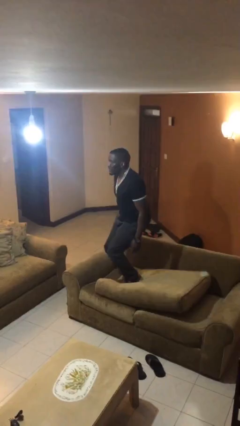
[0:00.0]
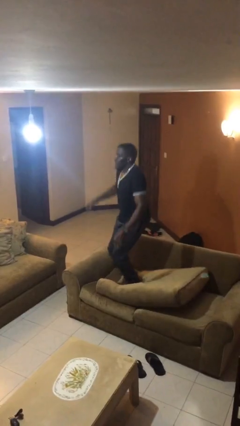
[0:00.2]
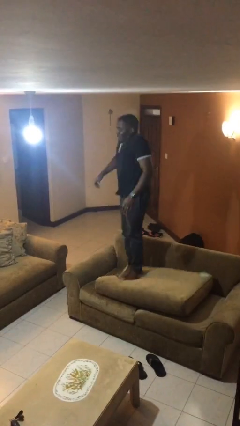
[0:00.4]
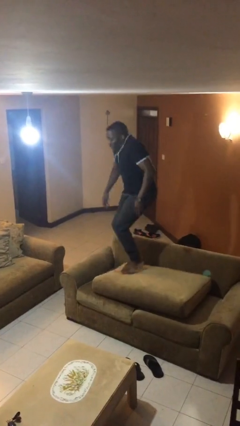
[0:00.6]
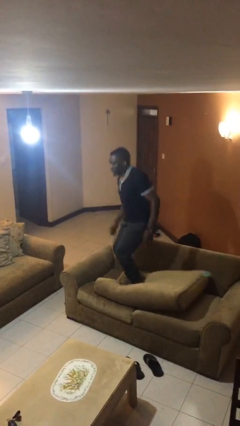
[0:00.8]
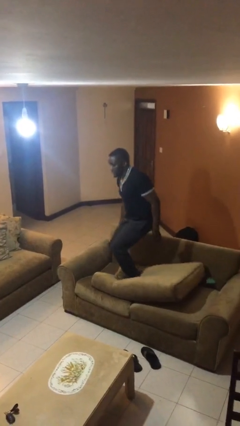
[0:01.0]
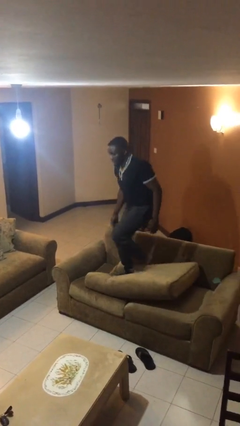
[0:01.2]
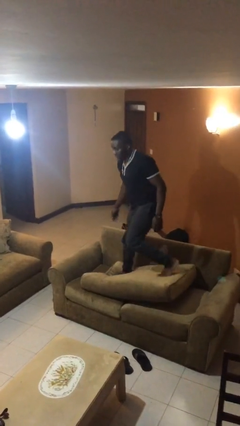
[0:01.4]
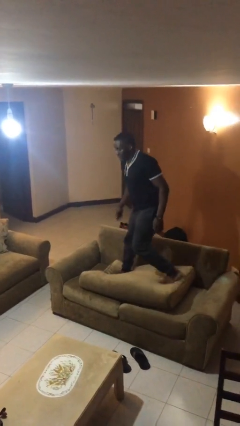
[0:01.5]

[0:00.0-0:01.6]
person jumps on couch

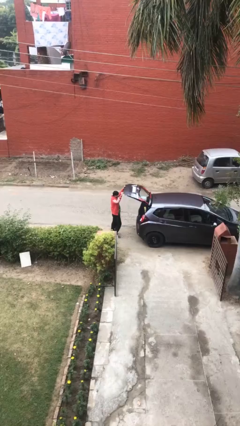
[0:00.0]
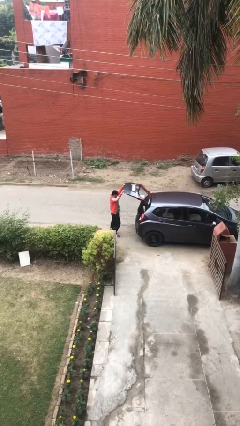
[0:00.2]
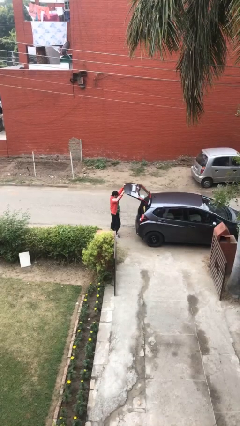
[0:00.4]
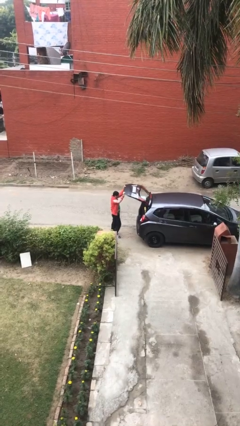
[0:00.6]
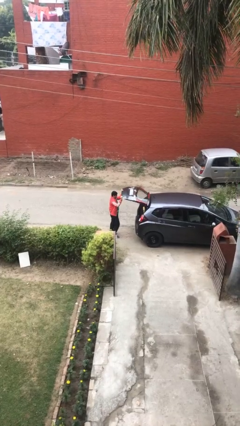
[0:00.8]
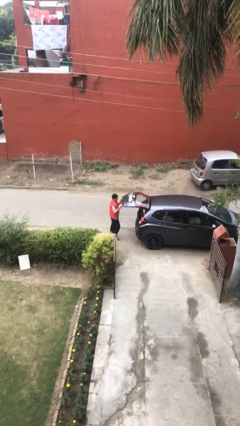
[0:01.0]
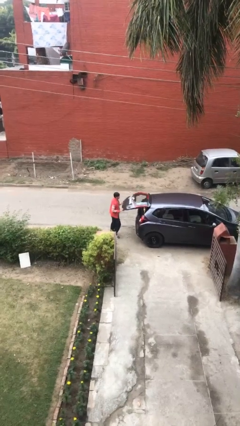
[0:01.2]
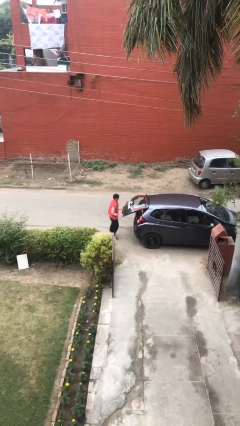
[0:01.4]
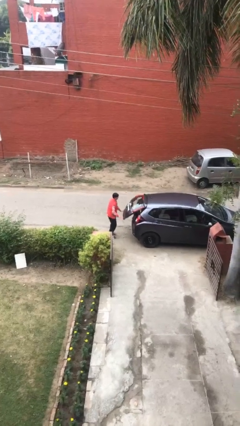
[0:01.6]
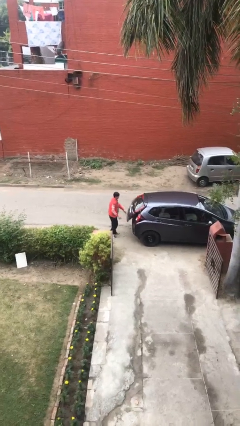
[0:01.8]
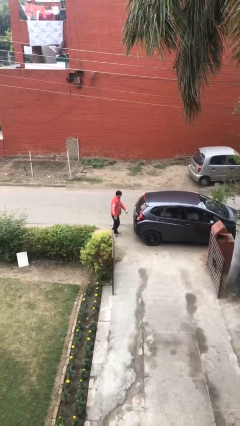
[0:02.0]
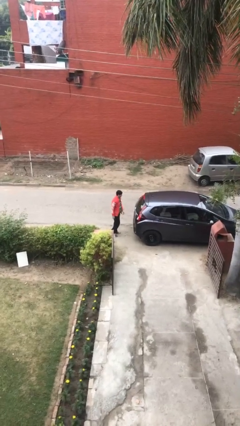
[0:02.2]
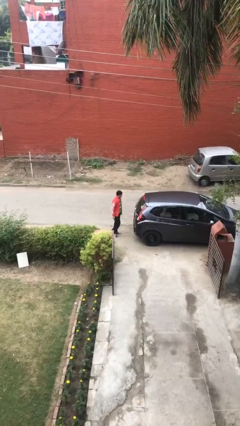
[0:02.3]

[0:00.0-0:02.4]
person closes car trunk

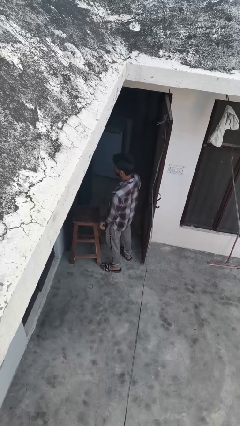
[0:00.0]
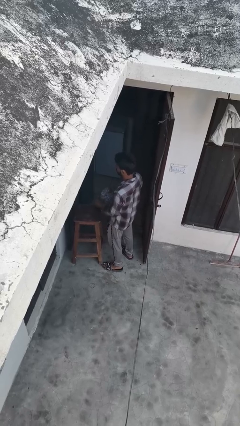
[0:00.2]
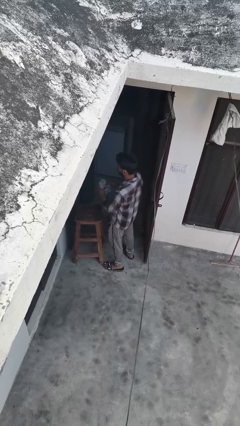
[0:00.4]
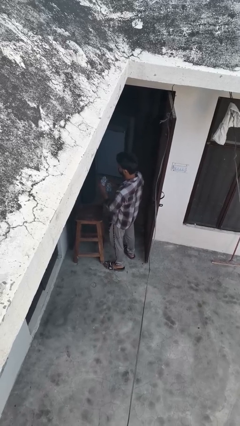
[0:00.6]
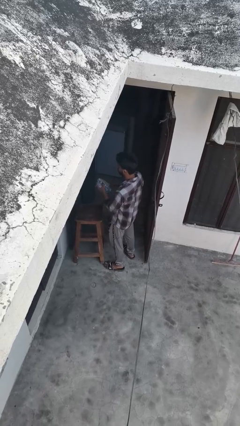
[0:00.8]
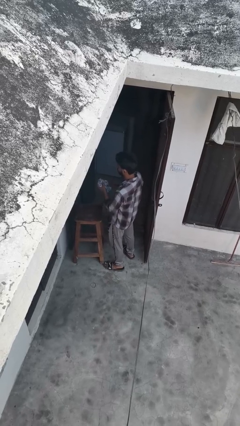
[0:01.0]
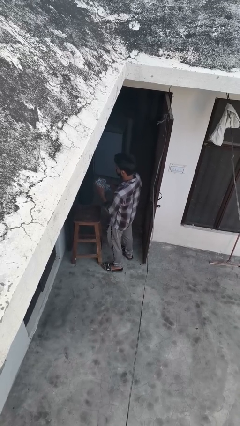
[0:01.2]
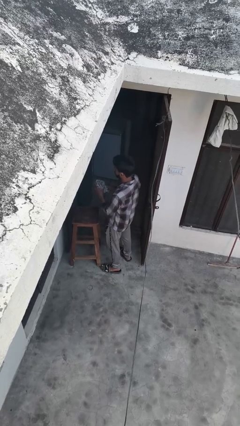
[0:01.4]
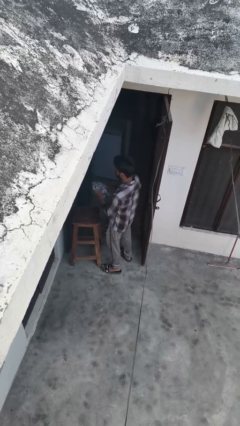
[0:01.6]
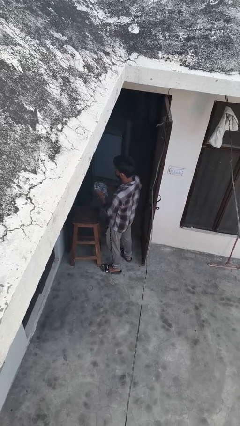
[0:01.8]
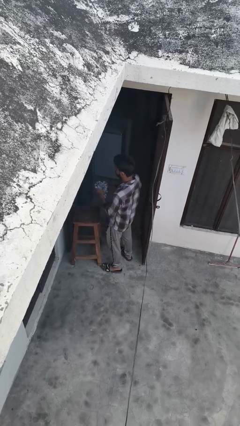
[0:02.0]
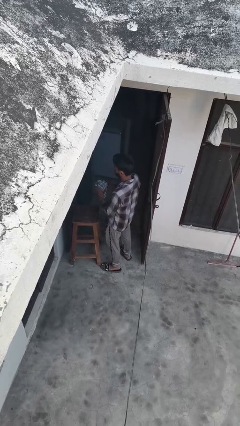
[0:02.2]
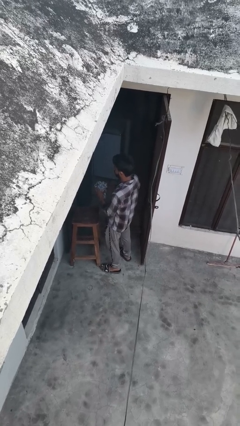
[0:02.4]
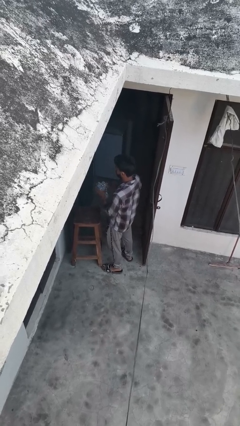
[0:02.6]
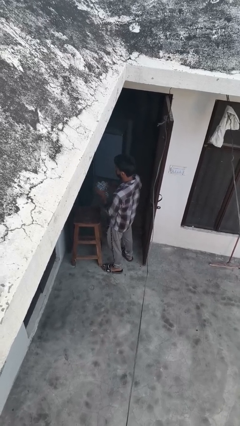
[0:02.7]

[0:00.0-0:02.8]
person squeezes object

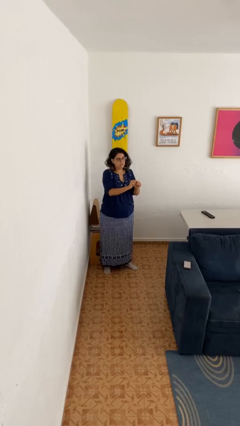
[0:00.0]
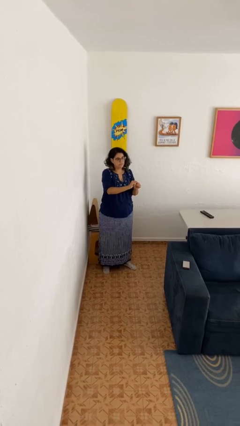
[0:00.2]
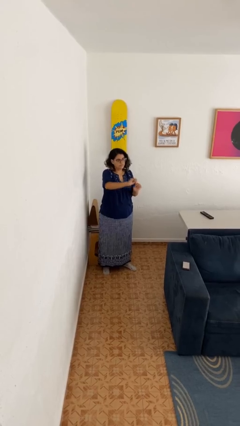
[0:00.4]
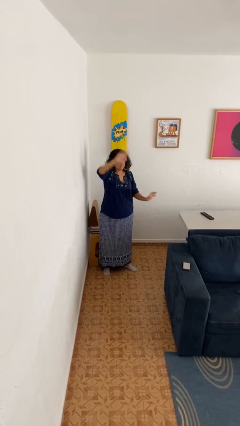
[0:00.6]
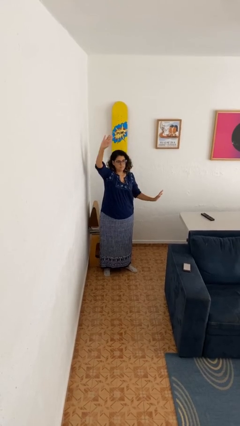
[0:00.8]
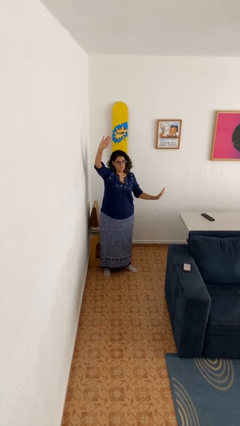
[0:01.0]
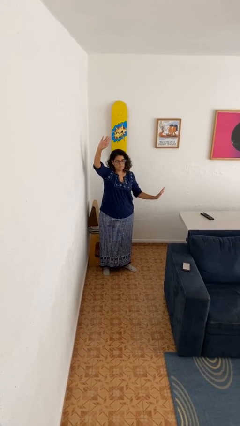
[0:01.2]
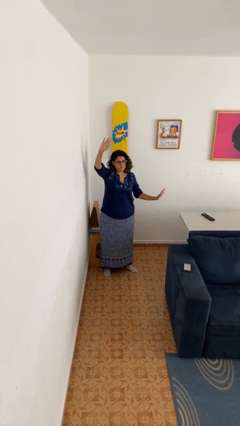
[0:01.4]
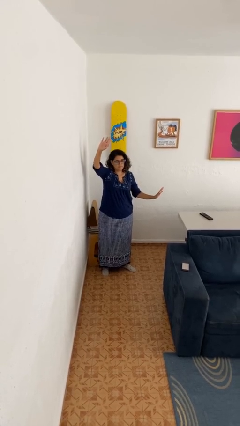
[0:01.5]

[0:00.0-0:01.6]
person gestures zoom in

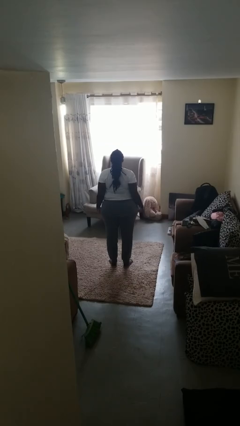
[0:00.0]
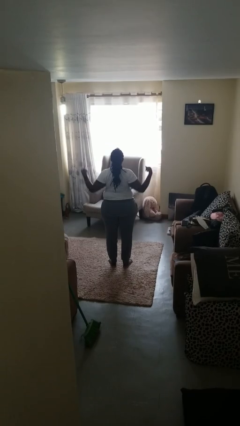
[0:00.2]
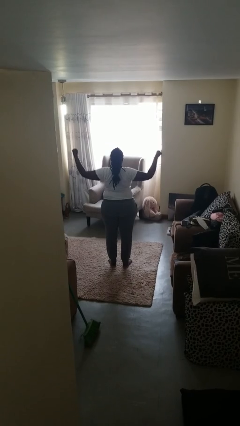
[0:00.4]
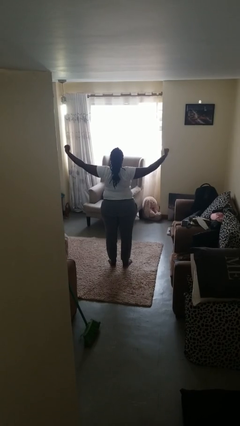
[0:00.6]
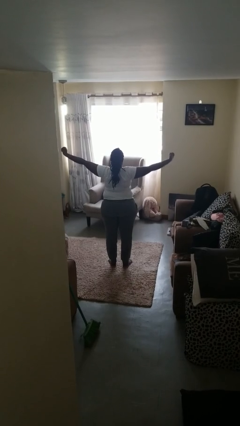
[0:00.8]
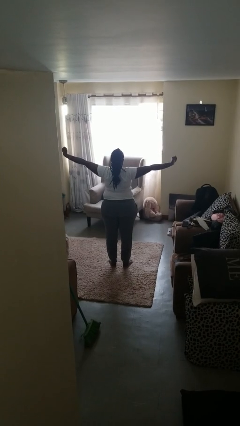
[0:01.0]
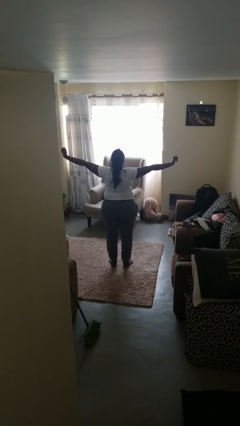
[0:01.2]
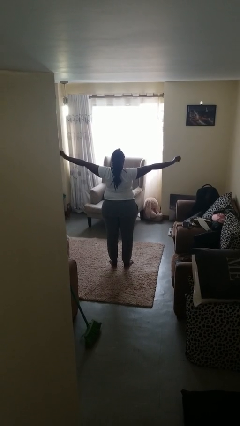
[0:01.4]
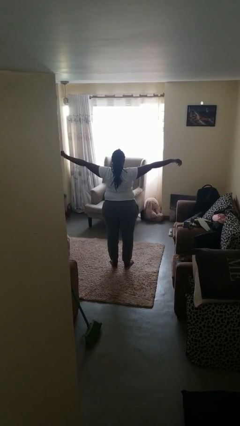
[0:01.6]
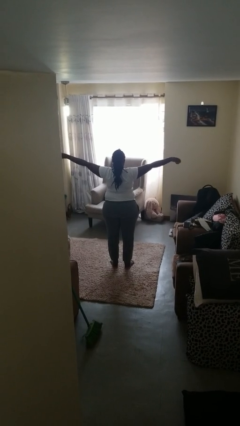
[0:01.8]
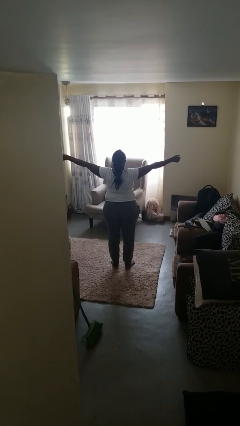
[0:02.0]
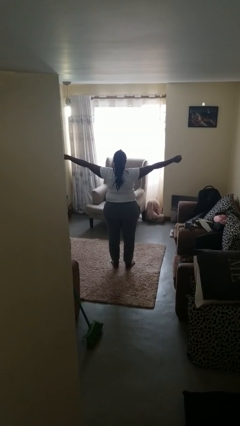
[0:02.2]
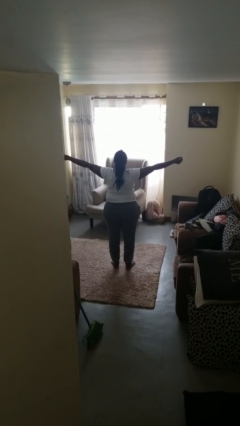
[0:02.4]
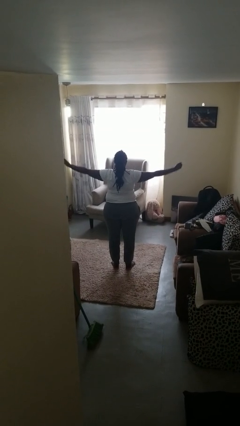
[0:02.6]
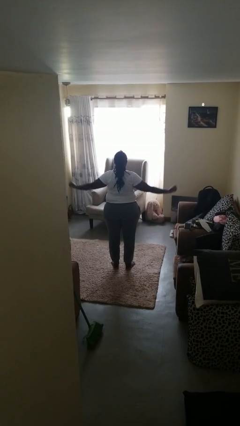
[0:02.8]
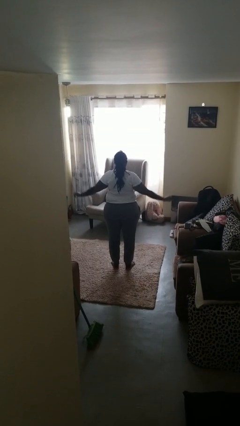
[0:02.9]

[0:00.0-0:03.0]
person stretches arms to side

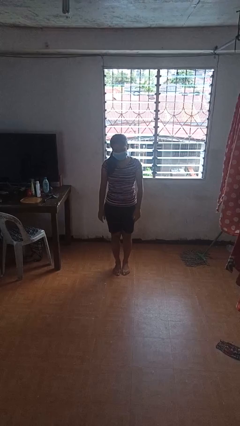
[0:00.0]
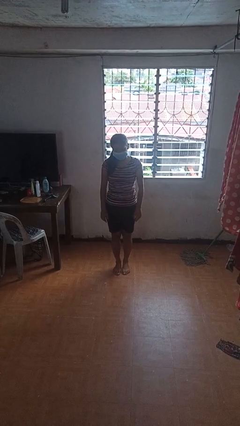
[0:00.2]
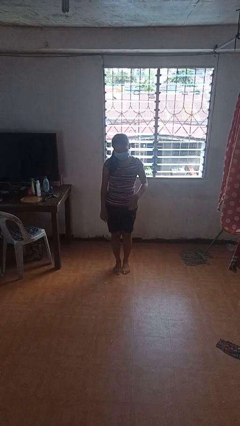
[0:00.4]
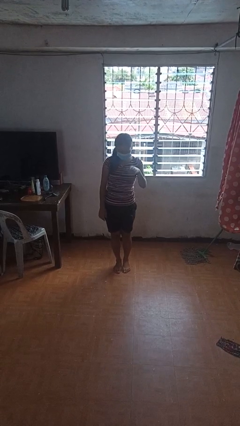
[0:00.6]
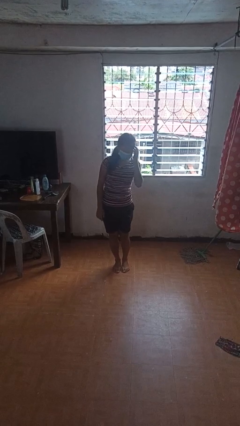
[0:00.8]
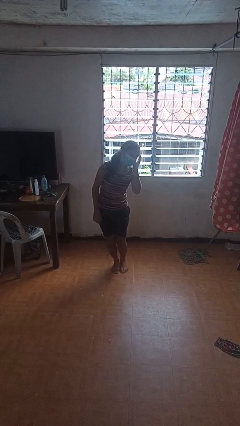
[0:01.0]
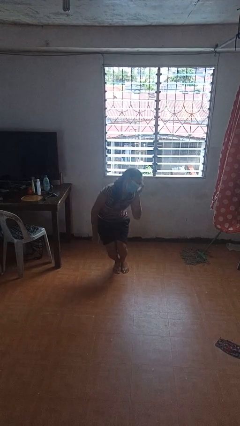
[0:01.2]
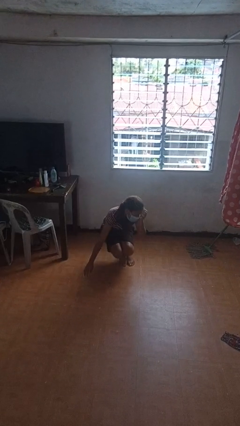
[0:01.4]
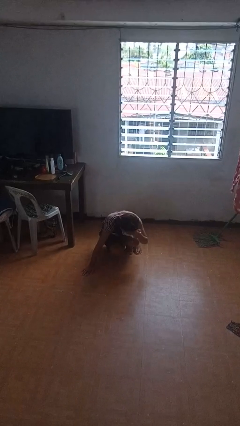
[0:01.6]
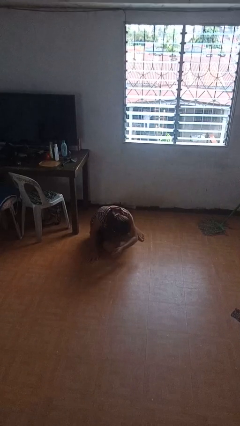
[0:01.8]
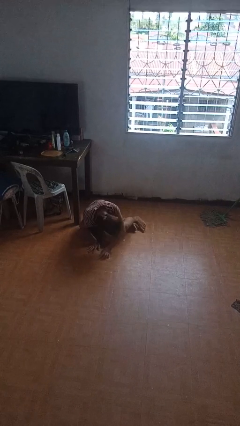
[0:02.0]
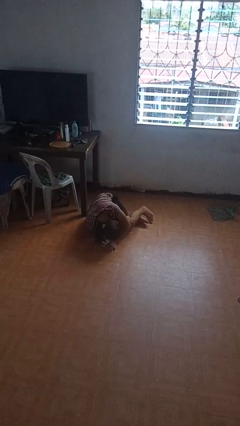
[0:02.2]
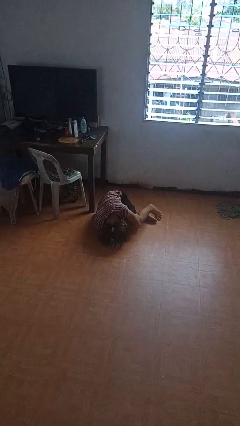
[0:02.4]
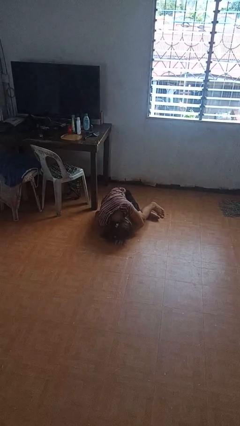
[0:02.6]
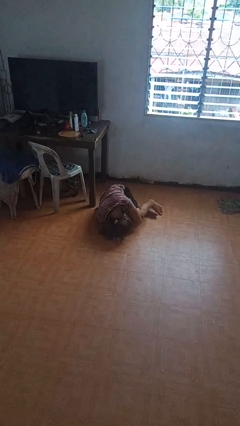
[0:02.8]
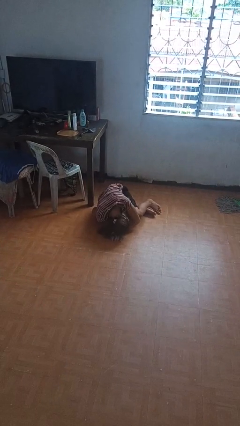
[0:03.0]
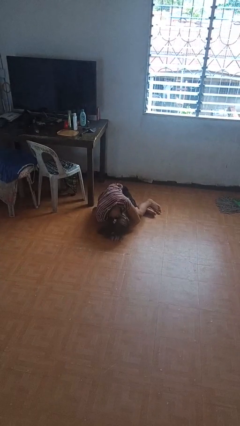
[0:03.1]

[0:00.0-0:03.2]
person falls while standing

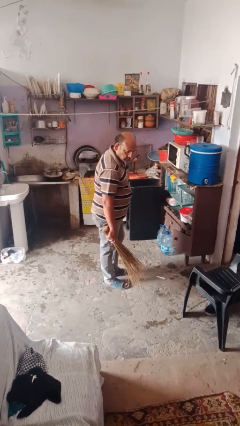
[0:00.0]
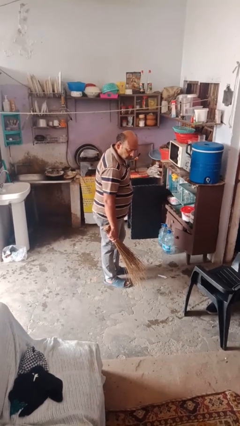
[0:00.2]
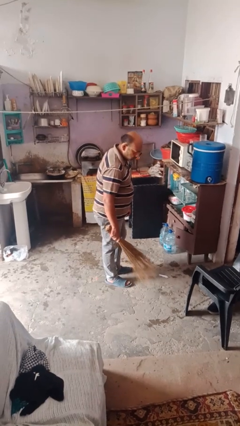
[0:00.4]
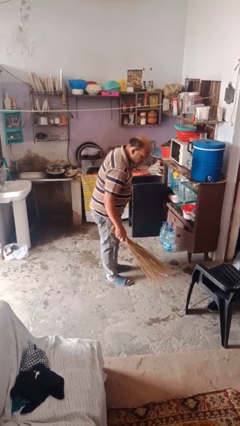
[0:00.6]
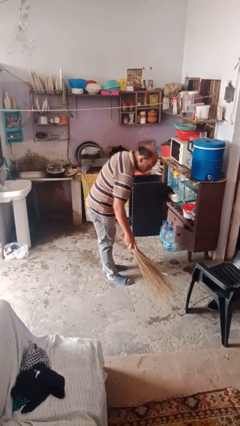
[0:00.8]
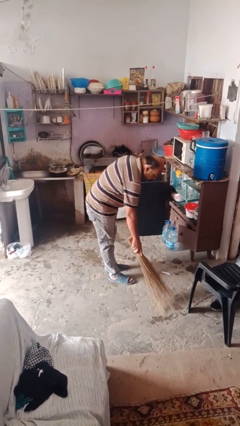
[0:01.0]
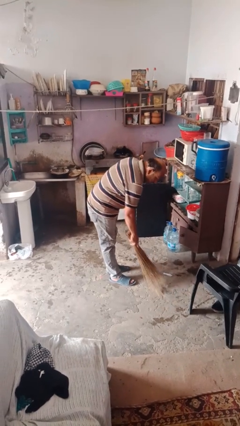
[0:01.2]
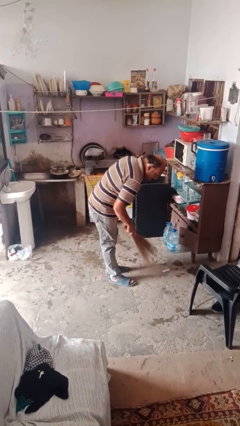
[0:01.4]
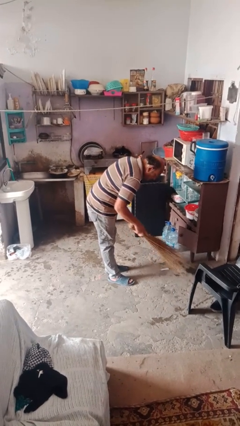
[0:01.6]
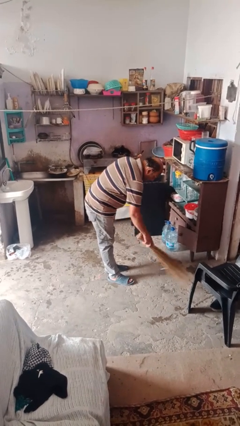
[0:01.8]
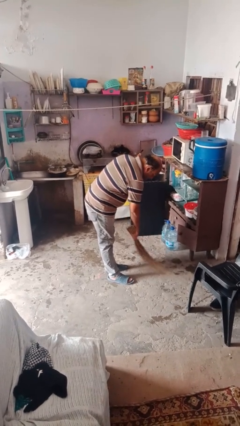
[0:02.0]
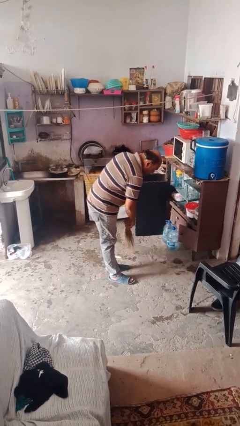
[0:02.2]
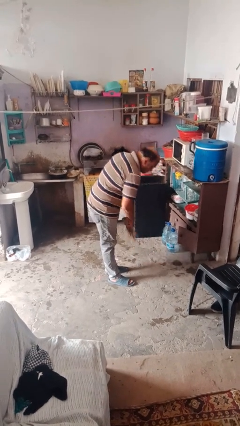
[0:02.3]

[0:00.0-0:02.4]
person sweeps floor
